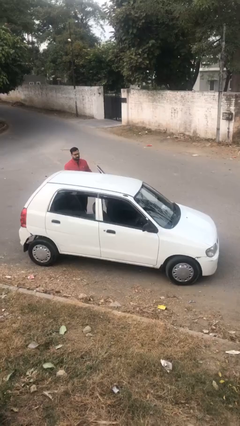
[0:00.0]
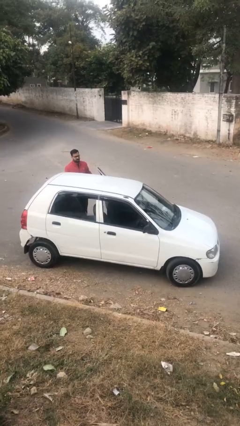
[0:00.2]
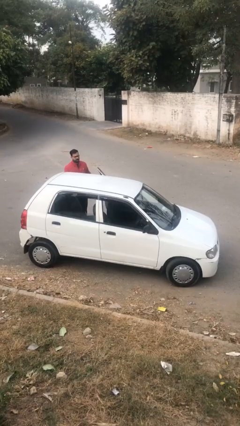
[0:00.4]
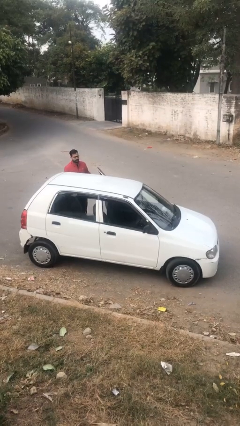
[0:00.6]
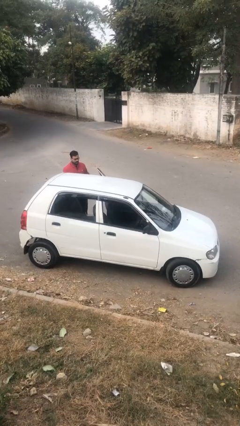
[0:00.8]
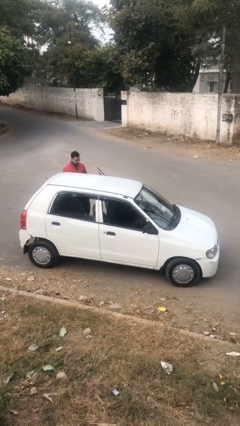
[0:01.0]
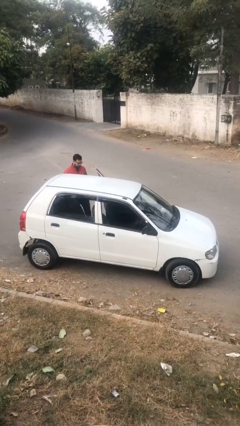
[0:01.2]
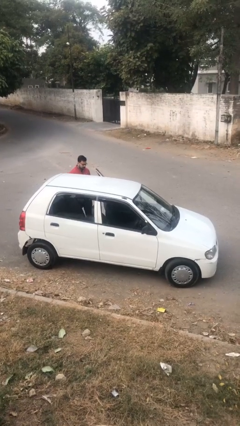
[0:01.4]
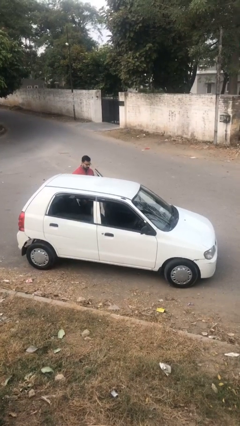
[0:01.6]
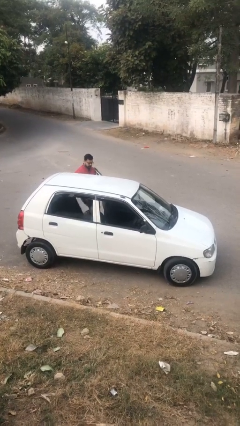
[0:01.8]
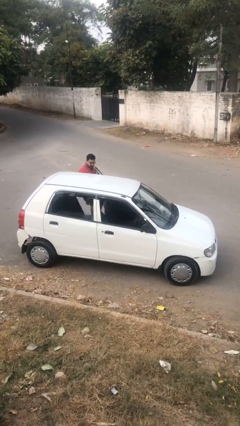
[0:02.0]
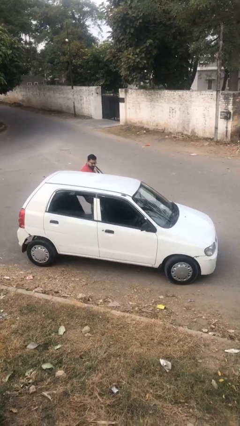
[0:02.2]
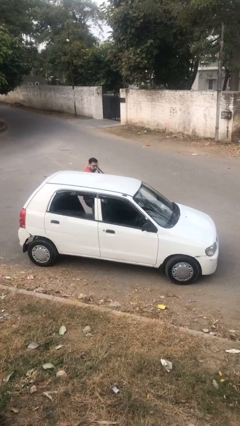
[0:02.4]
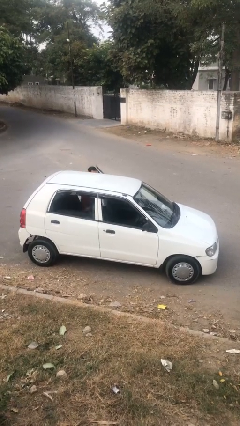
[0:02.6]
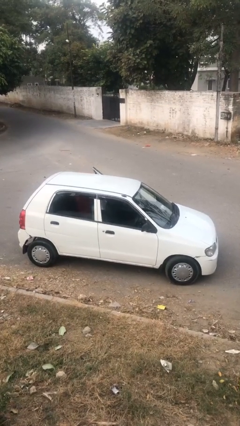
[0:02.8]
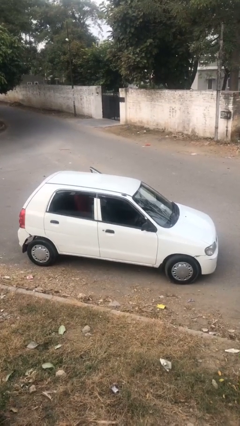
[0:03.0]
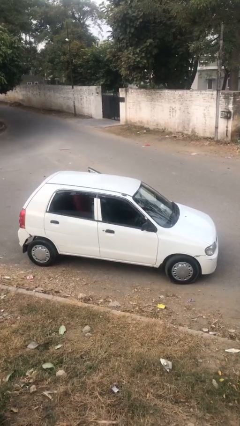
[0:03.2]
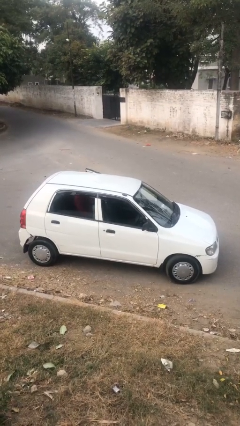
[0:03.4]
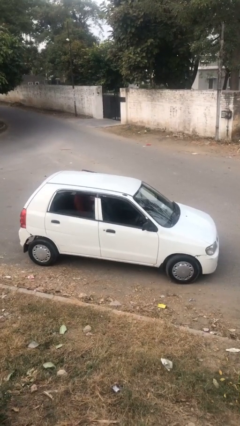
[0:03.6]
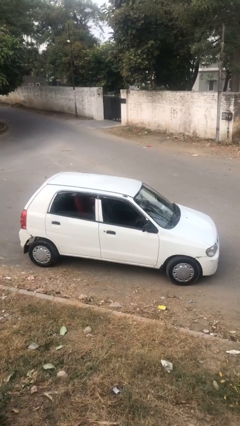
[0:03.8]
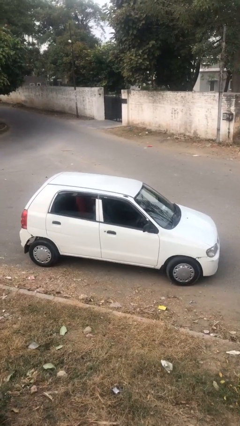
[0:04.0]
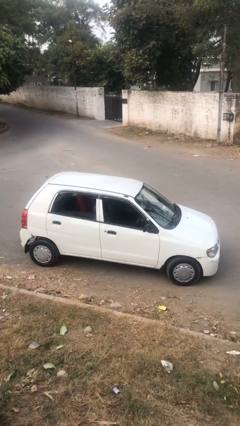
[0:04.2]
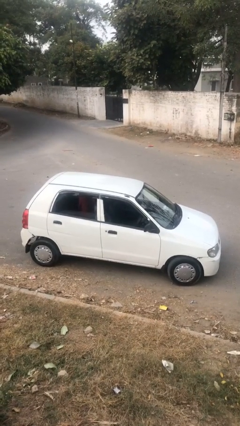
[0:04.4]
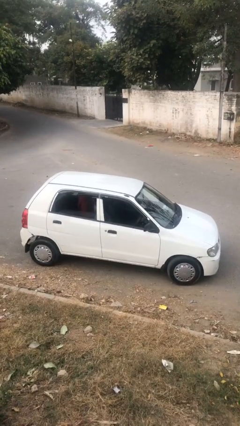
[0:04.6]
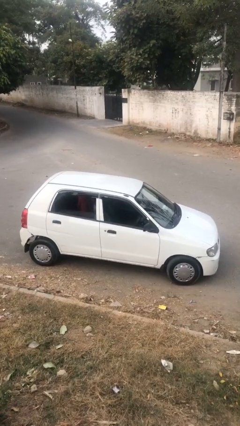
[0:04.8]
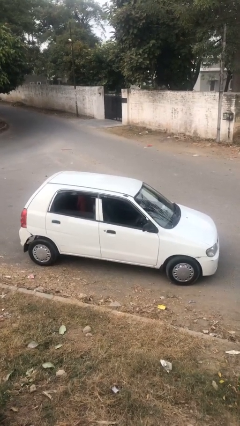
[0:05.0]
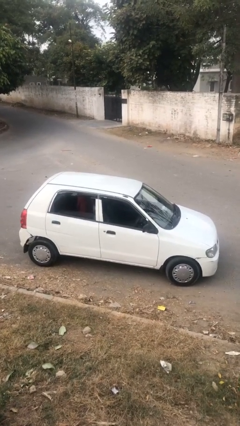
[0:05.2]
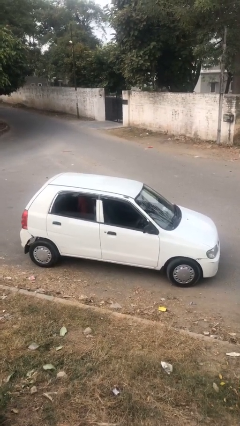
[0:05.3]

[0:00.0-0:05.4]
car picks up person

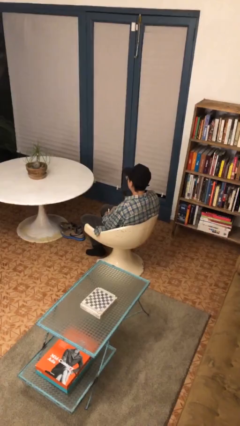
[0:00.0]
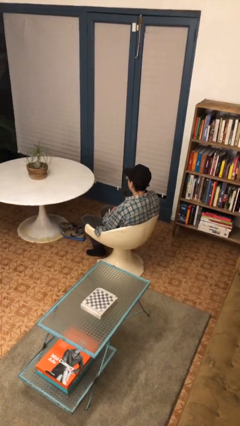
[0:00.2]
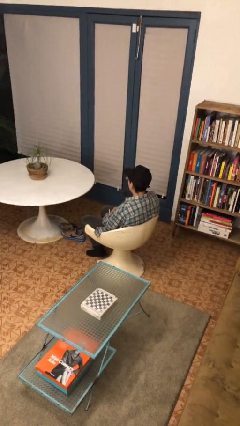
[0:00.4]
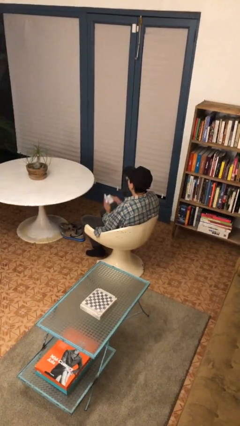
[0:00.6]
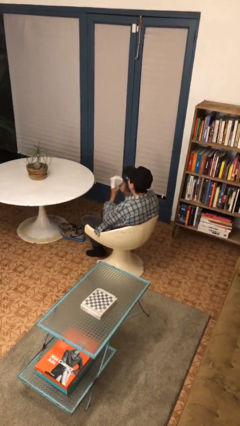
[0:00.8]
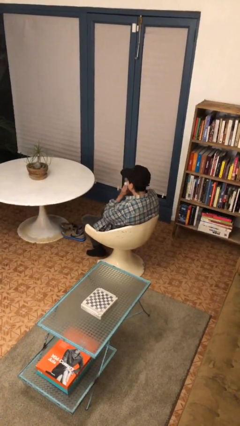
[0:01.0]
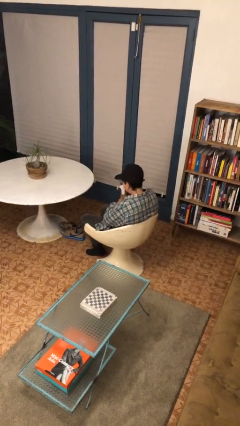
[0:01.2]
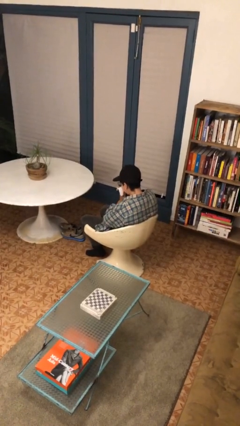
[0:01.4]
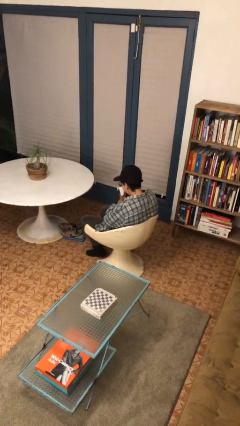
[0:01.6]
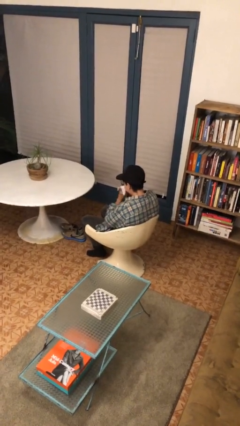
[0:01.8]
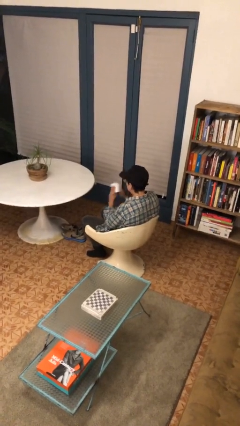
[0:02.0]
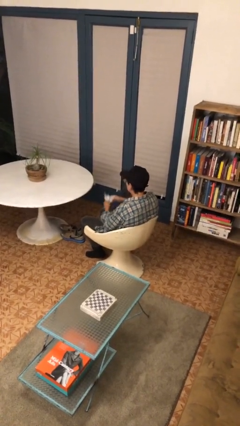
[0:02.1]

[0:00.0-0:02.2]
person blows nose

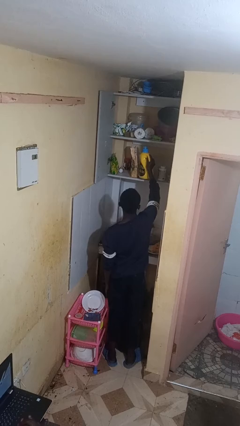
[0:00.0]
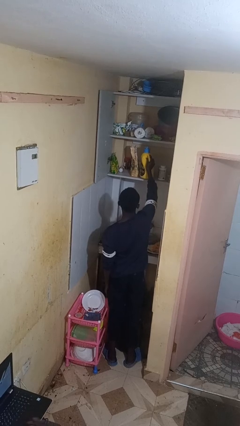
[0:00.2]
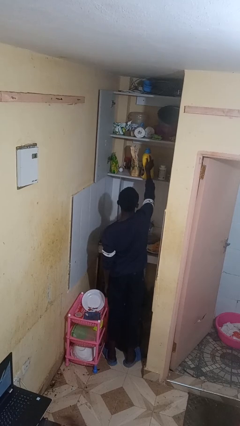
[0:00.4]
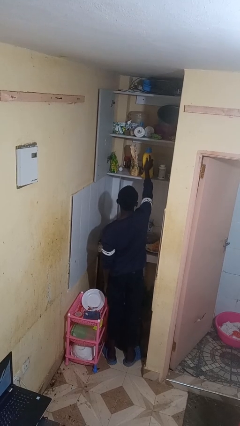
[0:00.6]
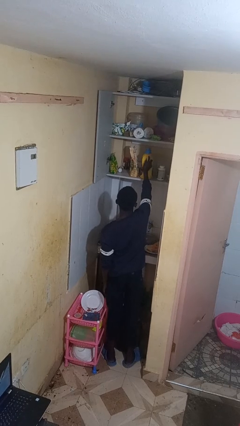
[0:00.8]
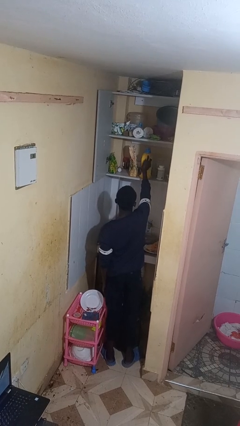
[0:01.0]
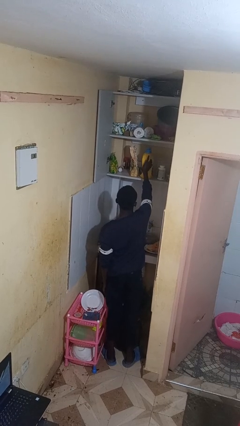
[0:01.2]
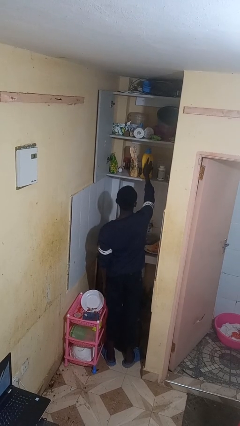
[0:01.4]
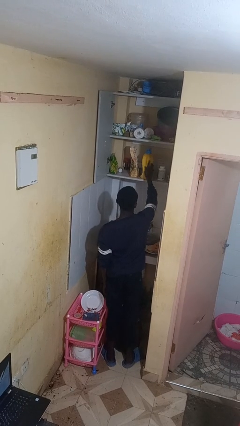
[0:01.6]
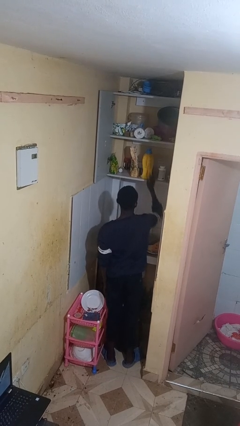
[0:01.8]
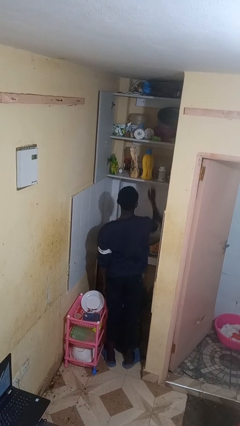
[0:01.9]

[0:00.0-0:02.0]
person puts object in cabinet

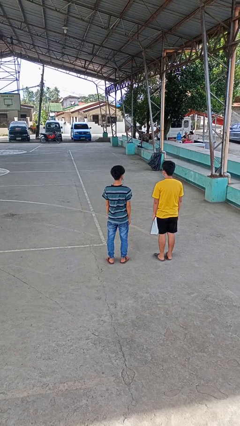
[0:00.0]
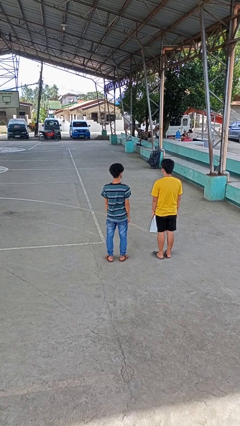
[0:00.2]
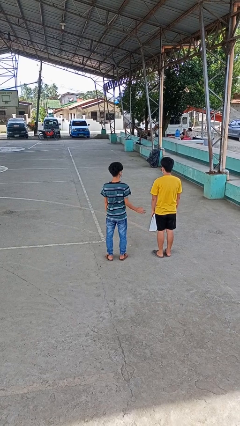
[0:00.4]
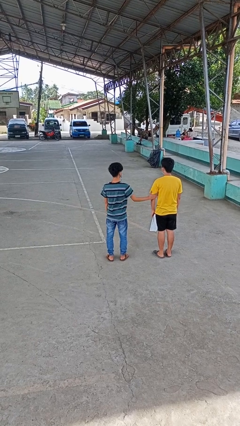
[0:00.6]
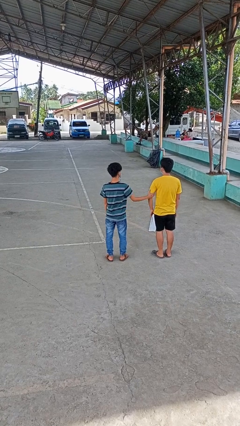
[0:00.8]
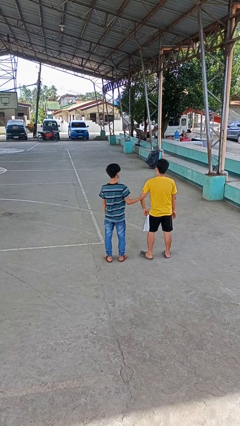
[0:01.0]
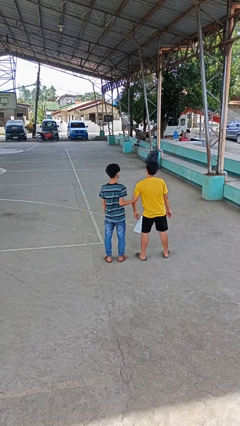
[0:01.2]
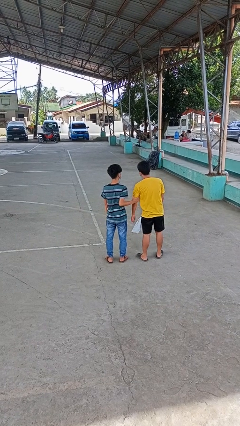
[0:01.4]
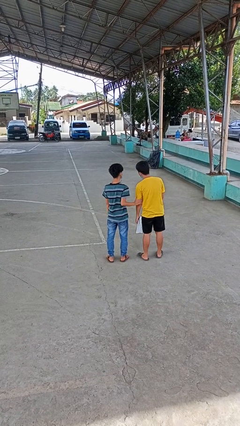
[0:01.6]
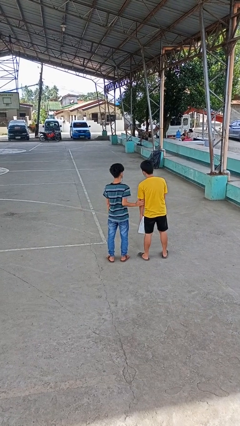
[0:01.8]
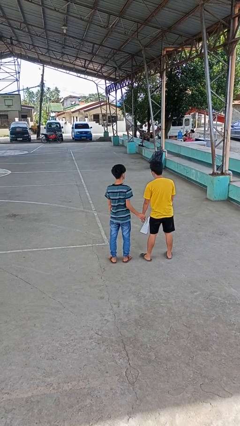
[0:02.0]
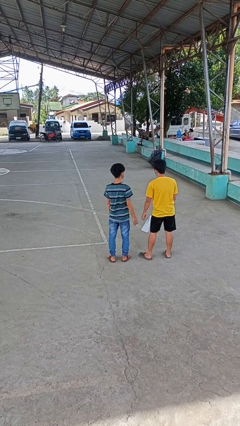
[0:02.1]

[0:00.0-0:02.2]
person grabs person by bicep

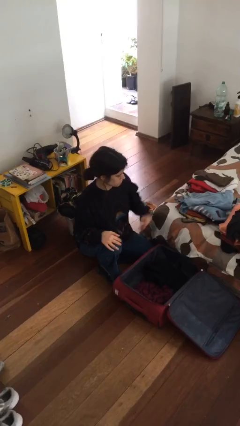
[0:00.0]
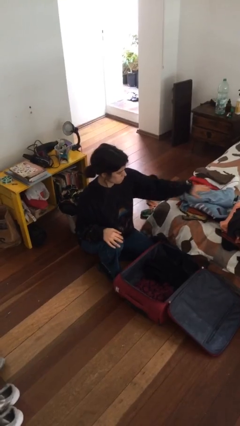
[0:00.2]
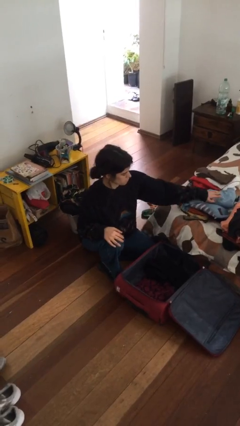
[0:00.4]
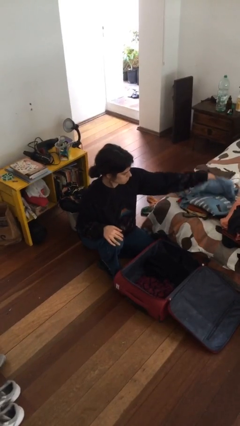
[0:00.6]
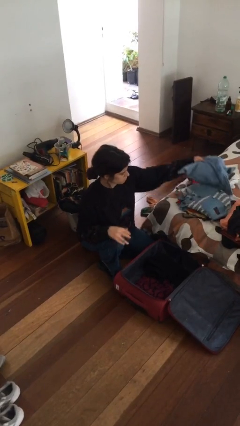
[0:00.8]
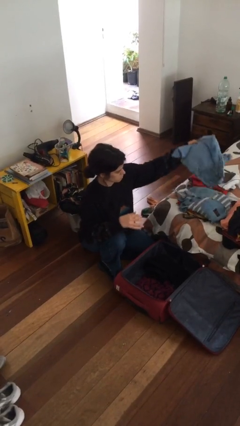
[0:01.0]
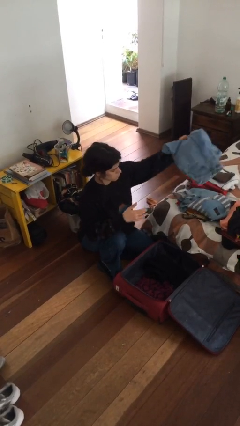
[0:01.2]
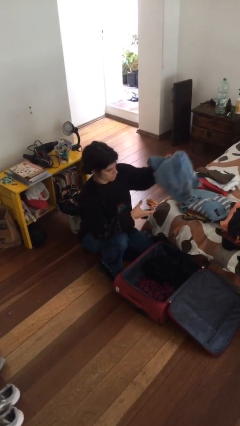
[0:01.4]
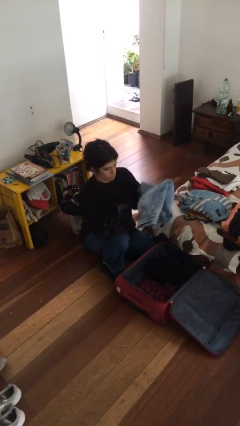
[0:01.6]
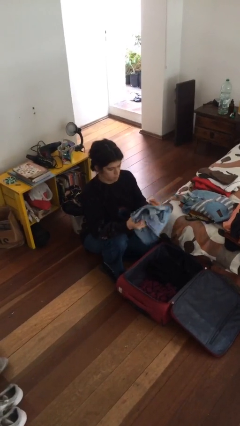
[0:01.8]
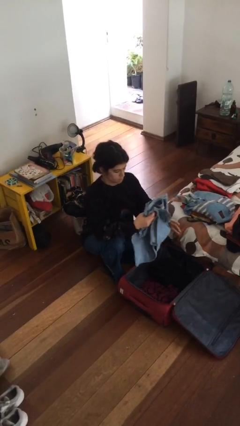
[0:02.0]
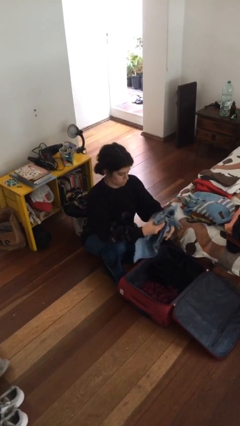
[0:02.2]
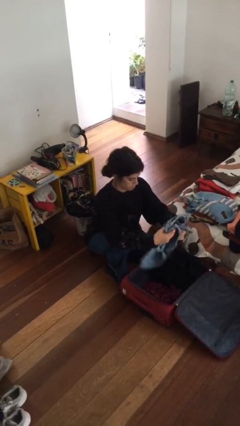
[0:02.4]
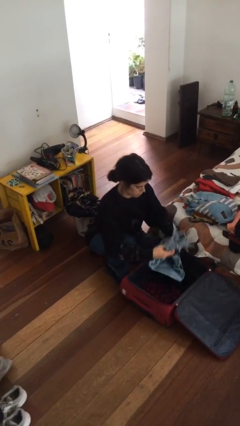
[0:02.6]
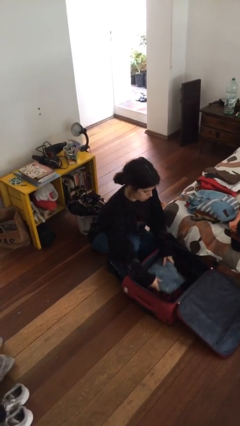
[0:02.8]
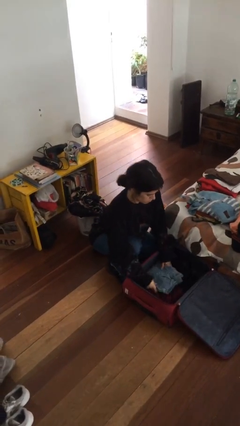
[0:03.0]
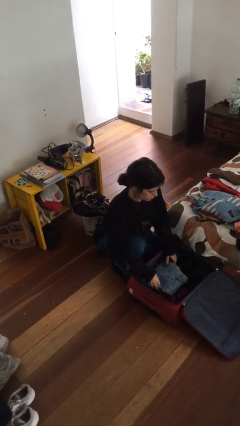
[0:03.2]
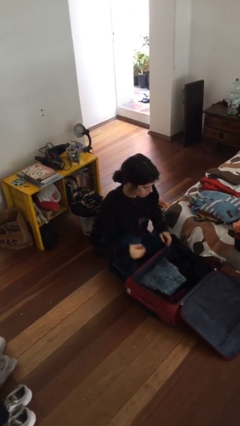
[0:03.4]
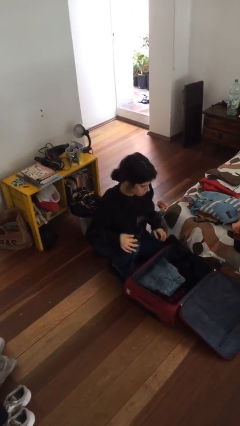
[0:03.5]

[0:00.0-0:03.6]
person loads clothes into suitcase

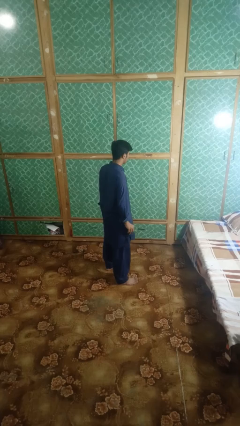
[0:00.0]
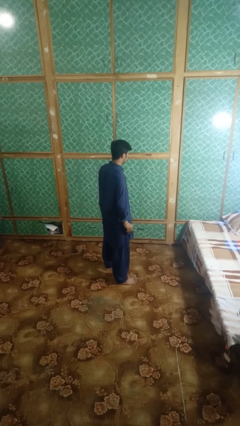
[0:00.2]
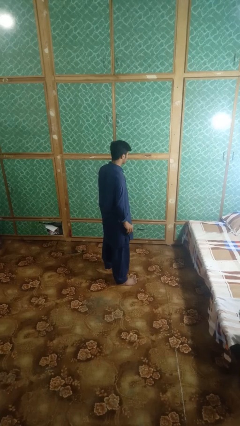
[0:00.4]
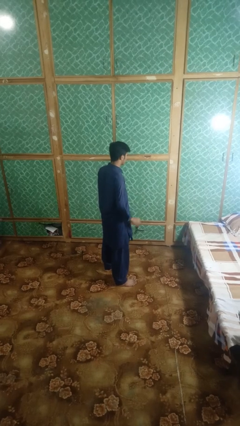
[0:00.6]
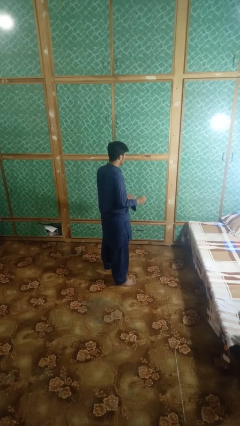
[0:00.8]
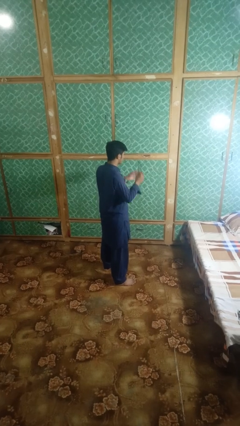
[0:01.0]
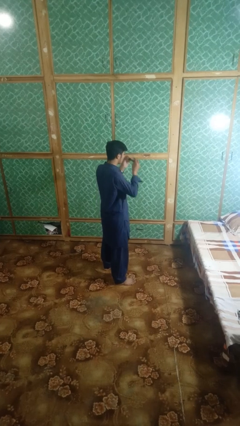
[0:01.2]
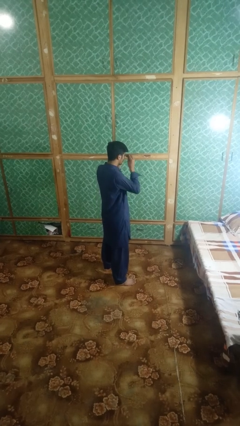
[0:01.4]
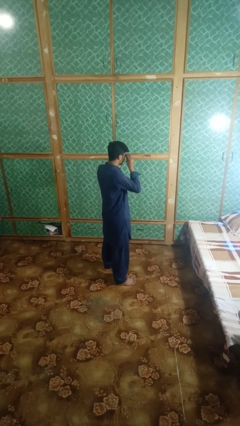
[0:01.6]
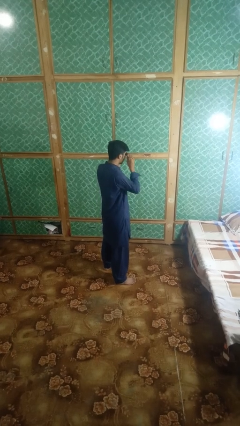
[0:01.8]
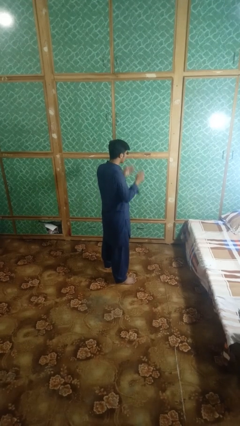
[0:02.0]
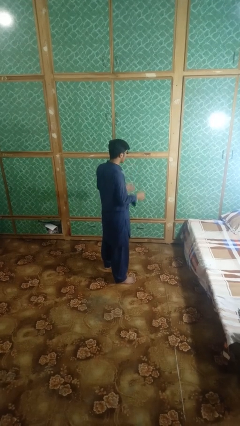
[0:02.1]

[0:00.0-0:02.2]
person puts on sunglasses
